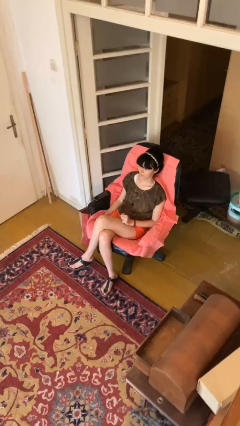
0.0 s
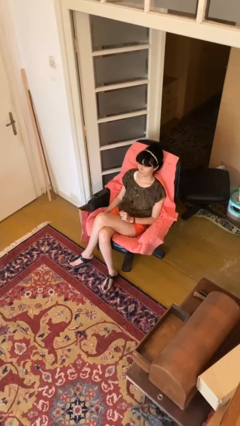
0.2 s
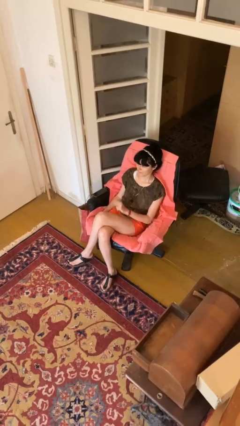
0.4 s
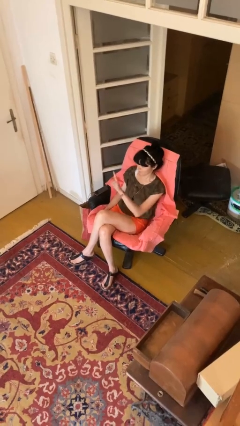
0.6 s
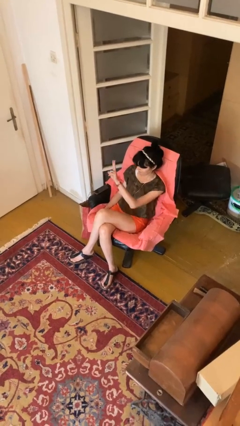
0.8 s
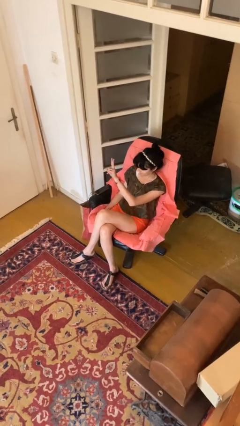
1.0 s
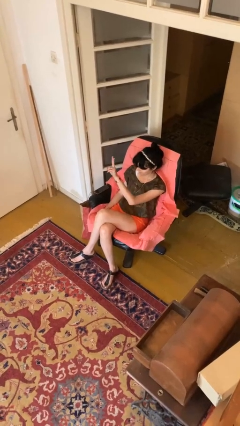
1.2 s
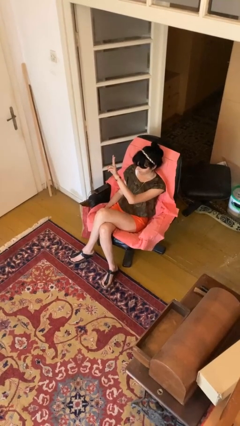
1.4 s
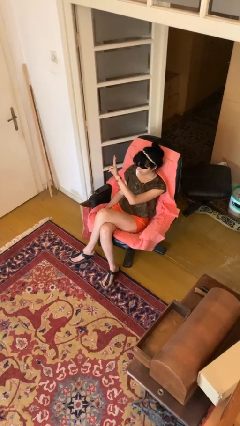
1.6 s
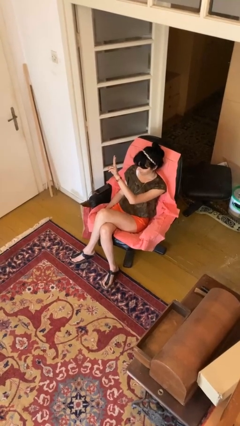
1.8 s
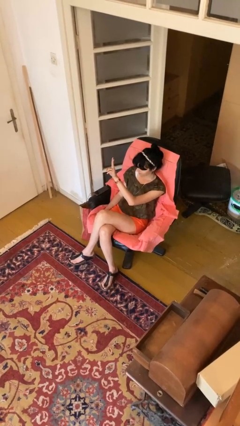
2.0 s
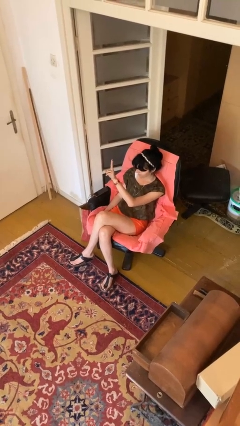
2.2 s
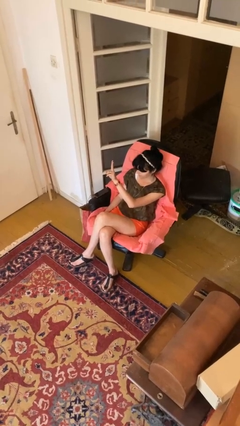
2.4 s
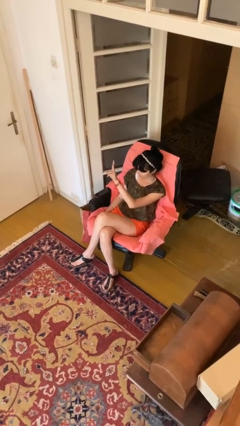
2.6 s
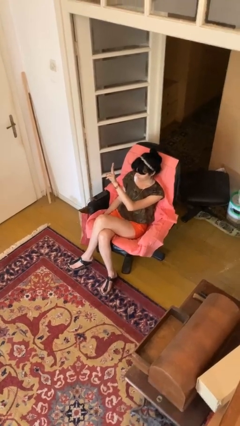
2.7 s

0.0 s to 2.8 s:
person gestures peace

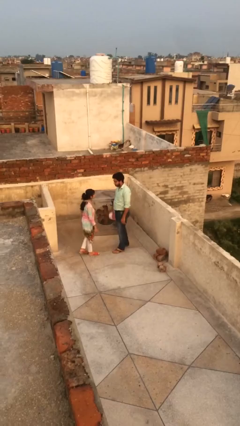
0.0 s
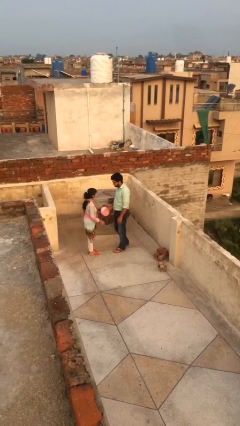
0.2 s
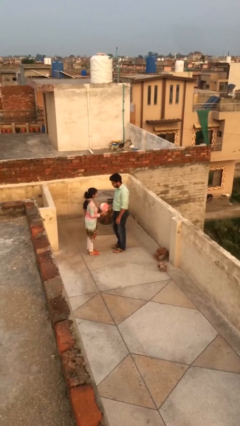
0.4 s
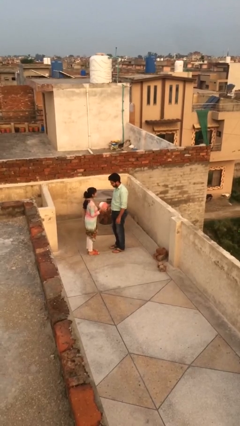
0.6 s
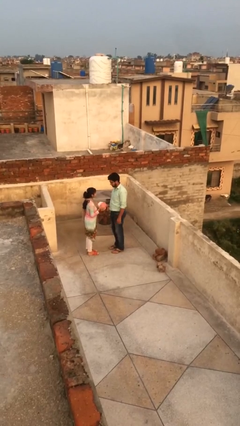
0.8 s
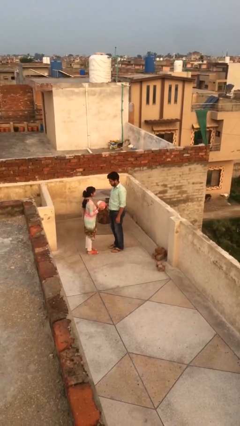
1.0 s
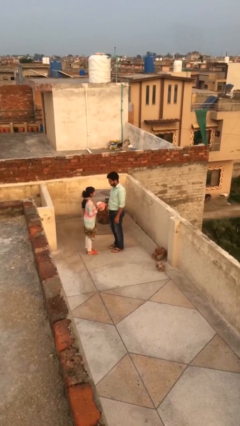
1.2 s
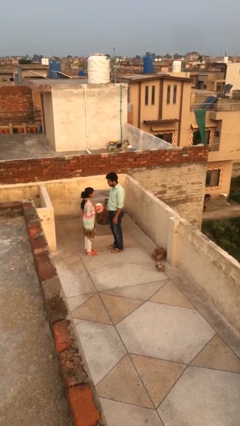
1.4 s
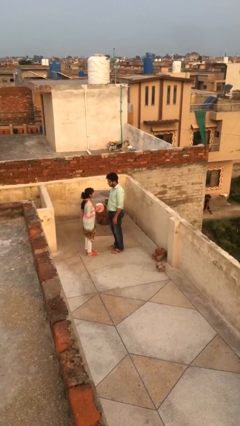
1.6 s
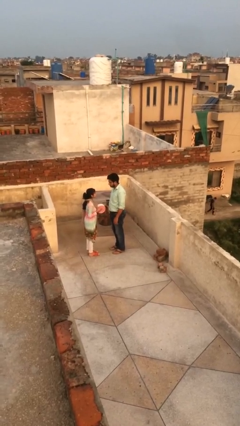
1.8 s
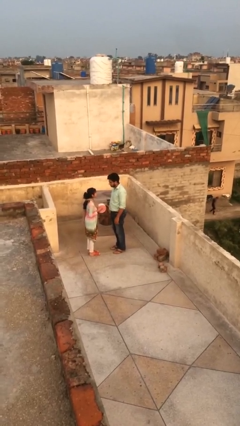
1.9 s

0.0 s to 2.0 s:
person transfers object to person

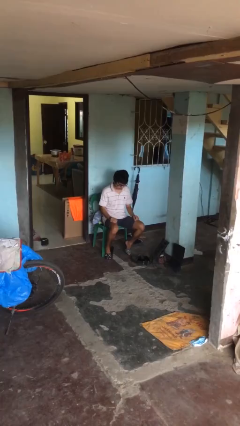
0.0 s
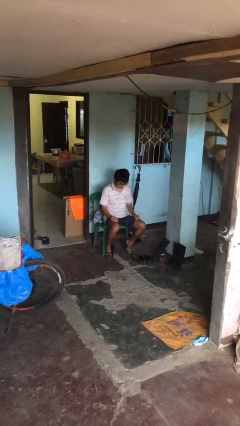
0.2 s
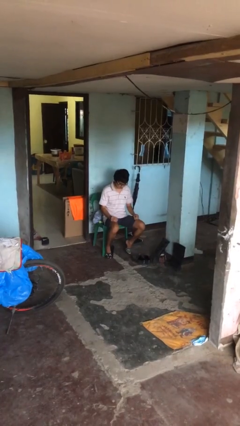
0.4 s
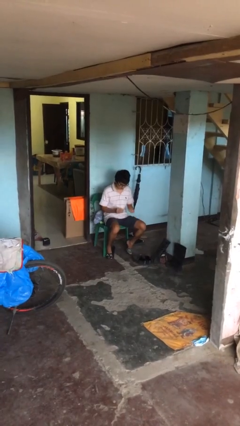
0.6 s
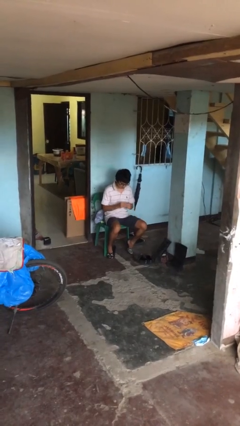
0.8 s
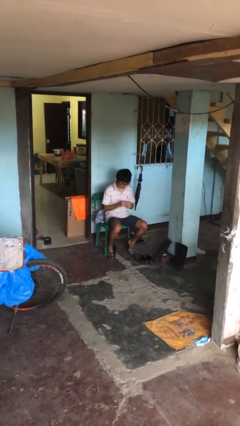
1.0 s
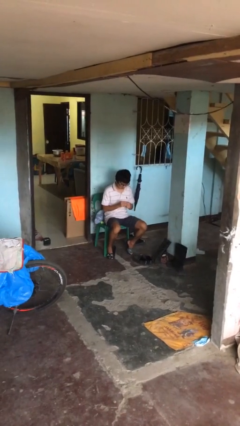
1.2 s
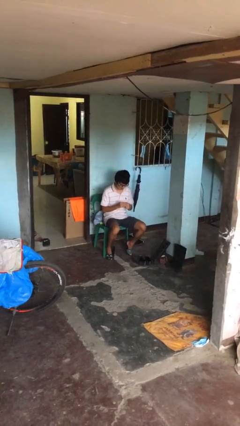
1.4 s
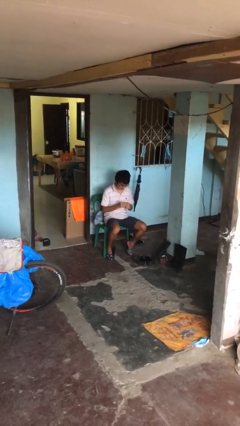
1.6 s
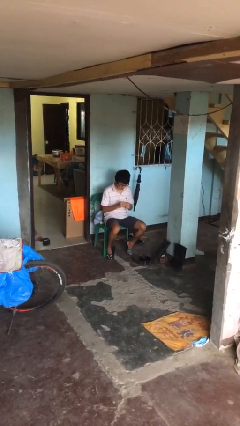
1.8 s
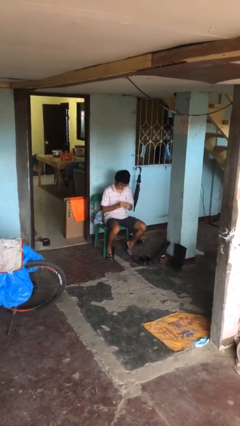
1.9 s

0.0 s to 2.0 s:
person puts on ring

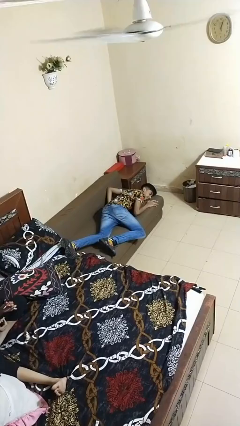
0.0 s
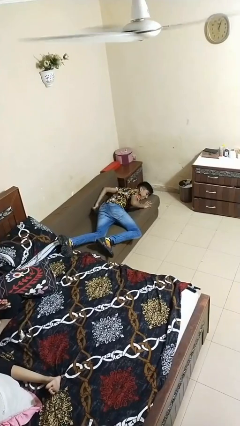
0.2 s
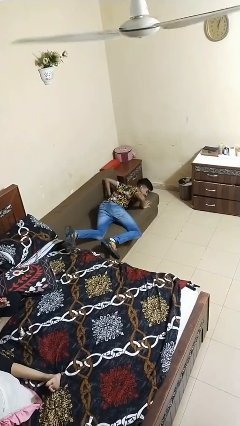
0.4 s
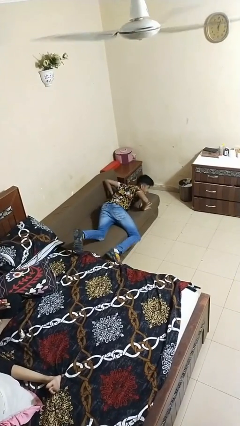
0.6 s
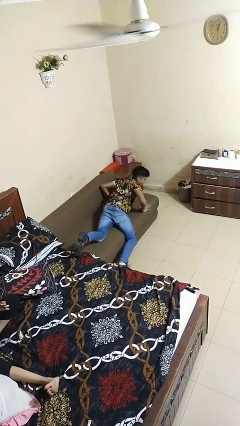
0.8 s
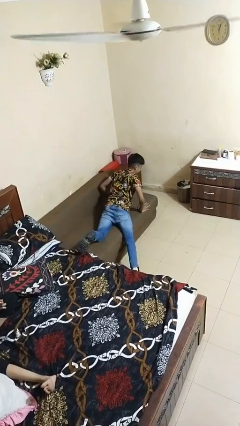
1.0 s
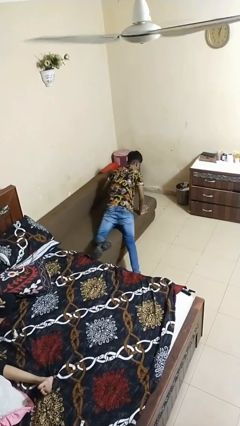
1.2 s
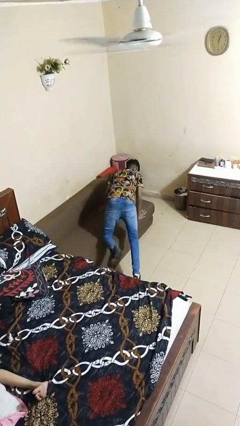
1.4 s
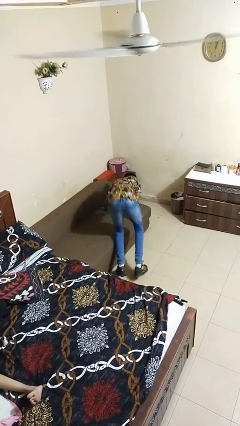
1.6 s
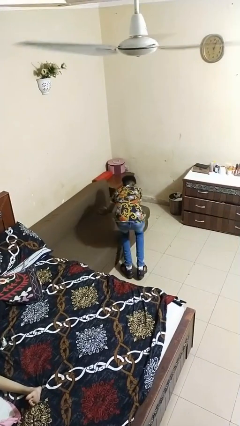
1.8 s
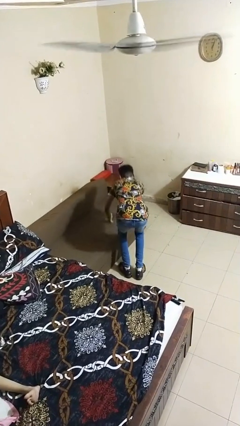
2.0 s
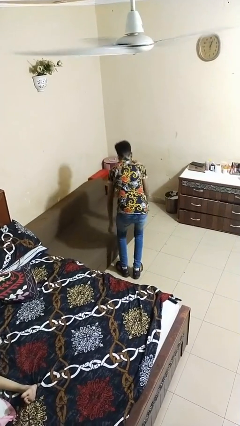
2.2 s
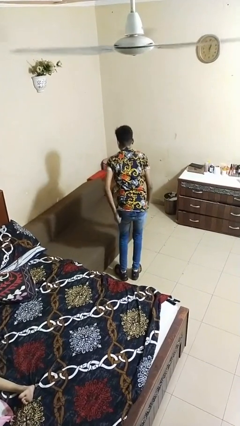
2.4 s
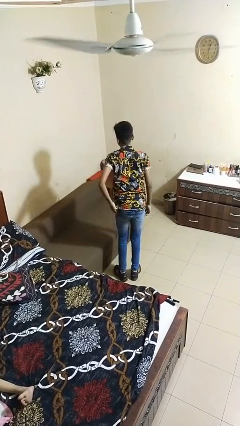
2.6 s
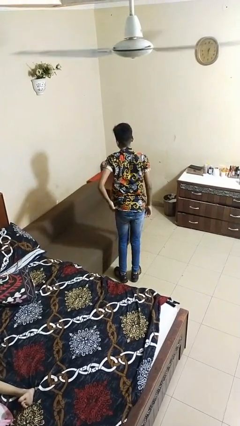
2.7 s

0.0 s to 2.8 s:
person stands up

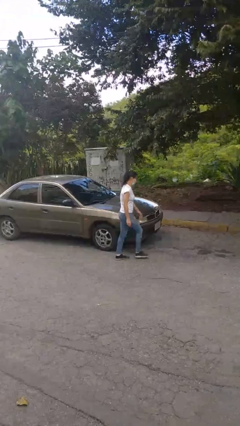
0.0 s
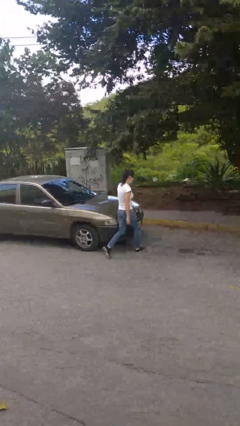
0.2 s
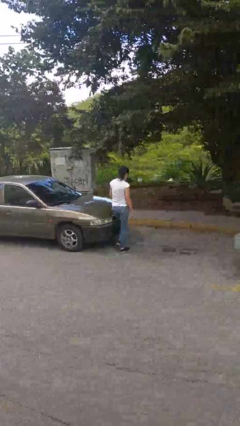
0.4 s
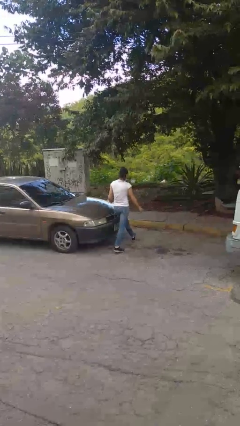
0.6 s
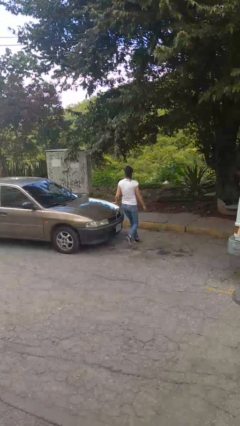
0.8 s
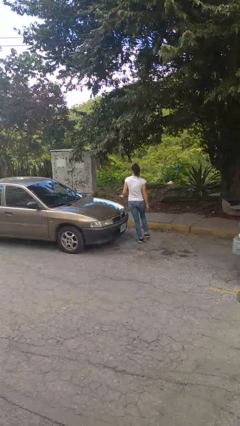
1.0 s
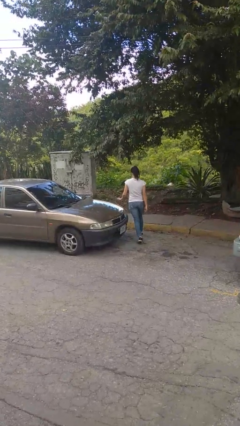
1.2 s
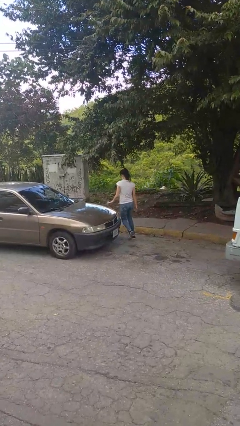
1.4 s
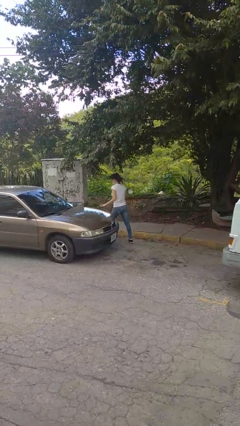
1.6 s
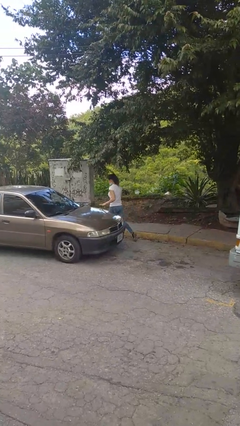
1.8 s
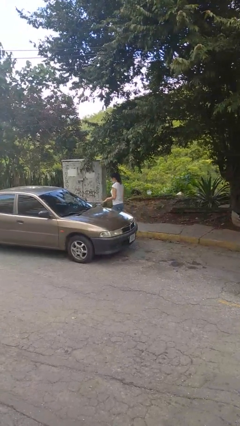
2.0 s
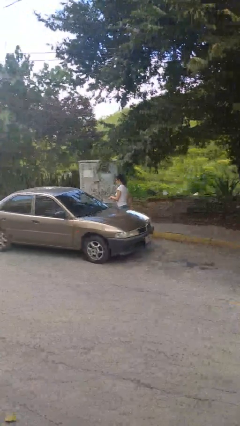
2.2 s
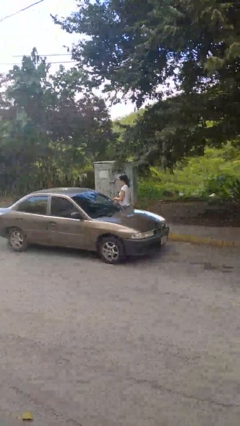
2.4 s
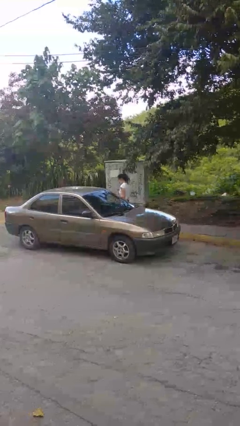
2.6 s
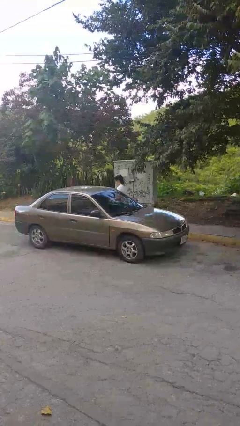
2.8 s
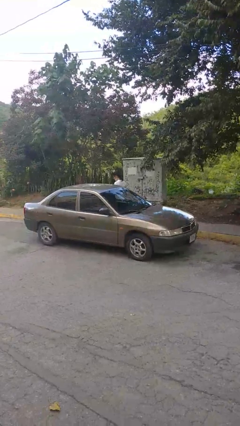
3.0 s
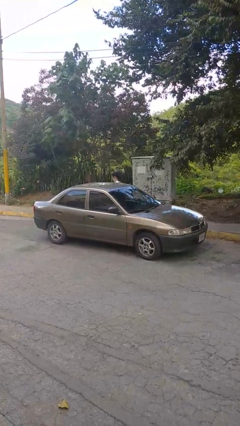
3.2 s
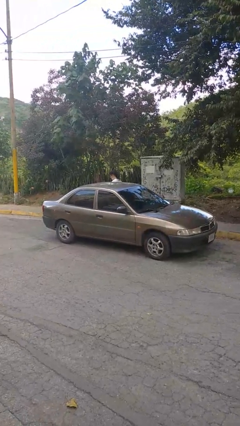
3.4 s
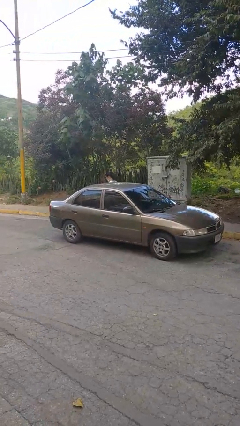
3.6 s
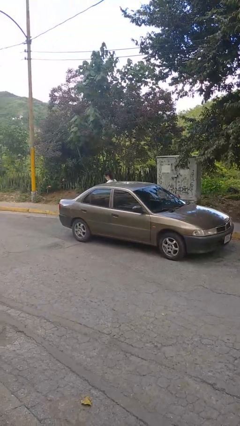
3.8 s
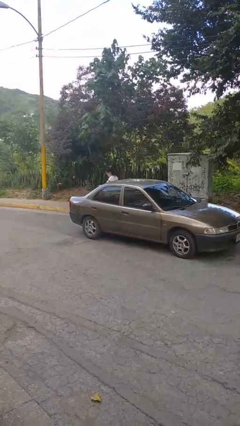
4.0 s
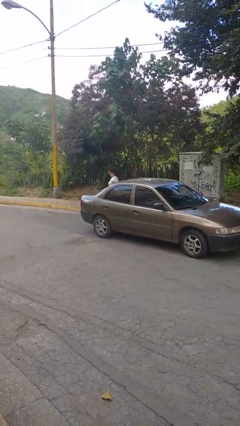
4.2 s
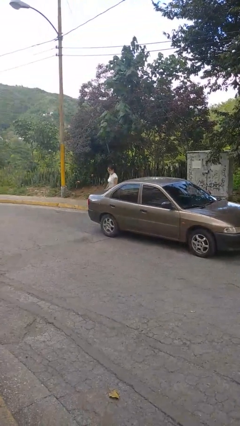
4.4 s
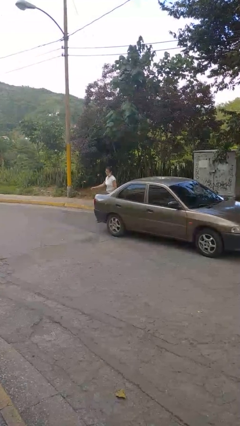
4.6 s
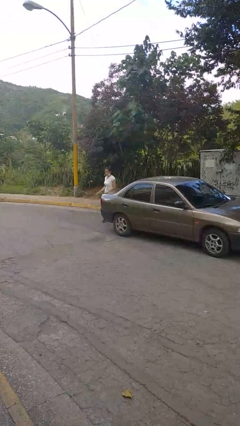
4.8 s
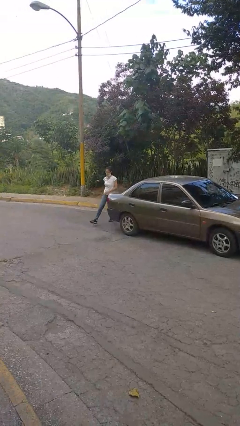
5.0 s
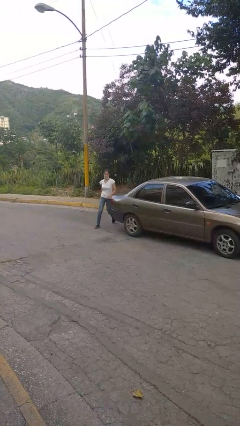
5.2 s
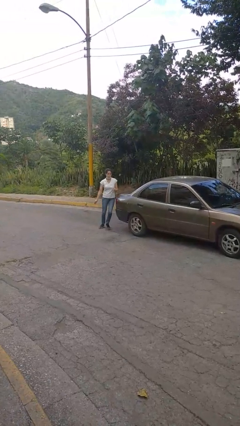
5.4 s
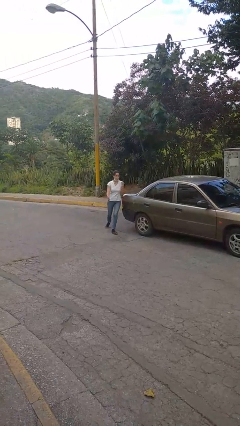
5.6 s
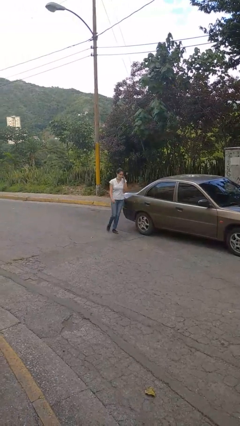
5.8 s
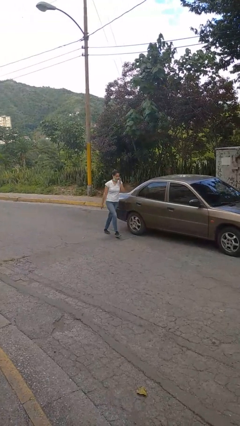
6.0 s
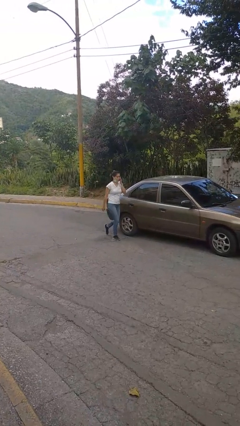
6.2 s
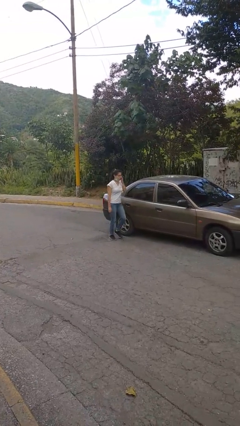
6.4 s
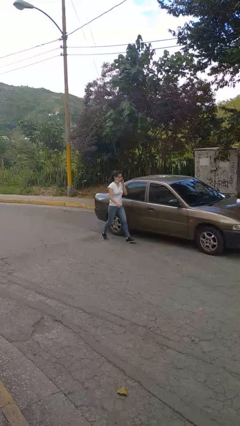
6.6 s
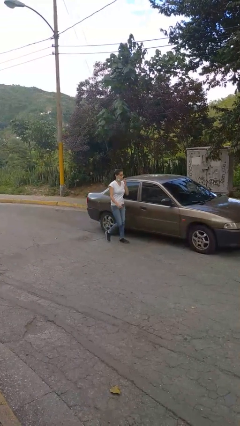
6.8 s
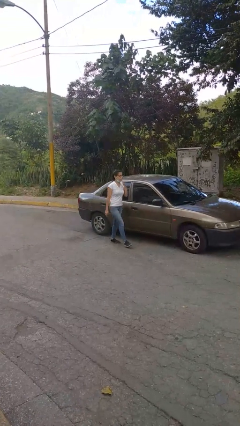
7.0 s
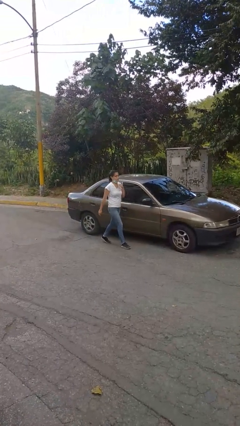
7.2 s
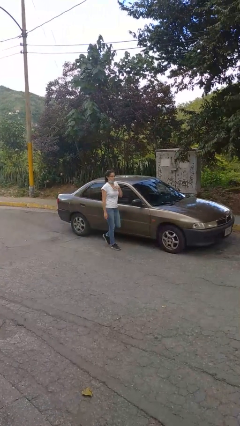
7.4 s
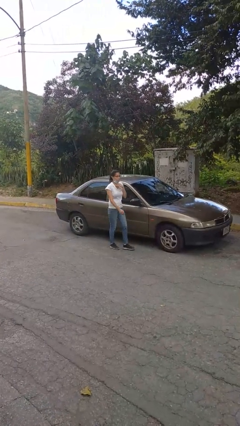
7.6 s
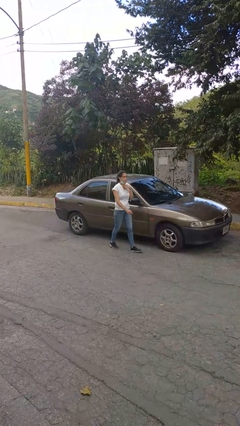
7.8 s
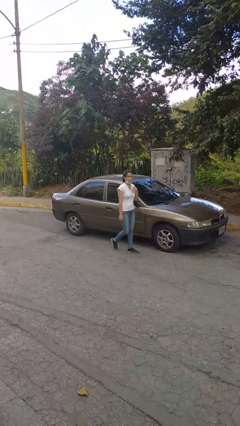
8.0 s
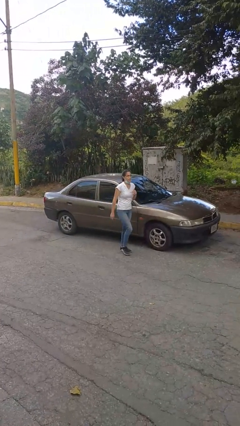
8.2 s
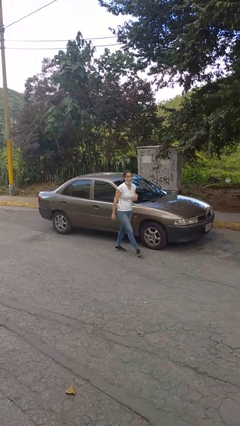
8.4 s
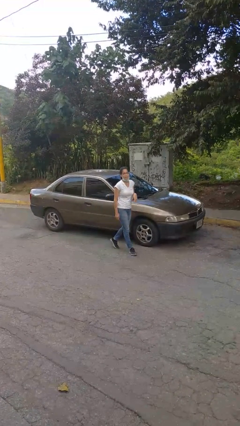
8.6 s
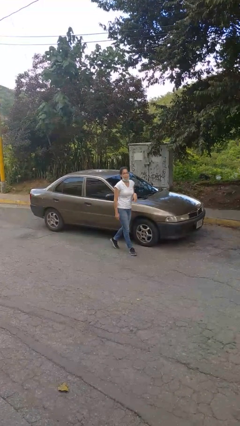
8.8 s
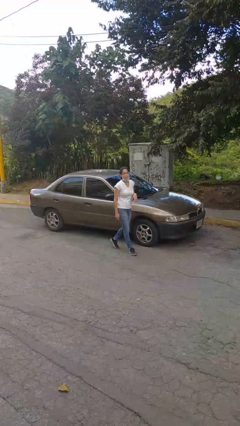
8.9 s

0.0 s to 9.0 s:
person walks around car
